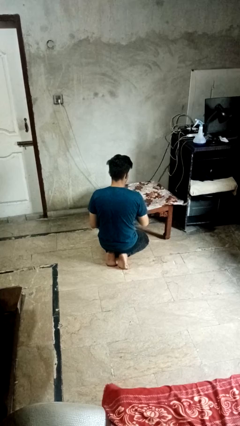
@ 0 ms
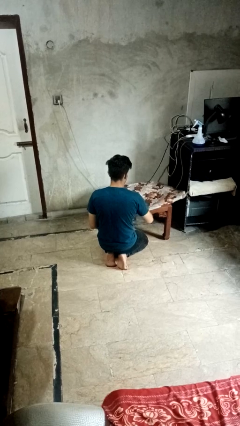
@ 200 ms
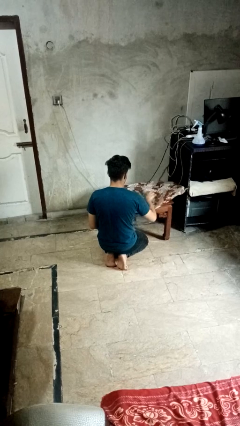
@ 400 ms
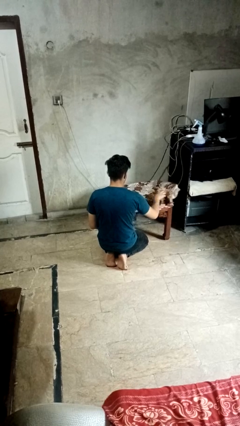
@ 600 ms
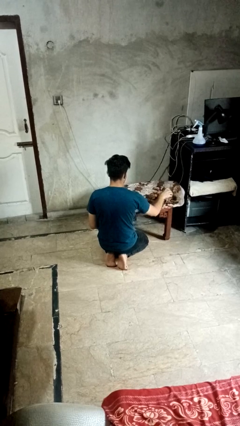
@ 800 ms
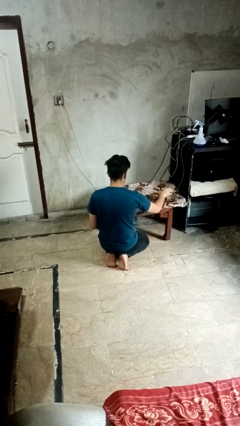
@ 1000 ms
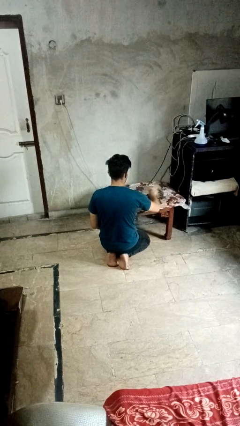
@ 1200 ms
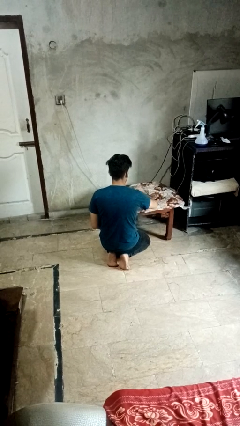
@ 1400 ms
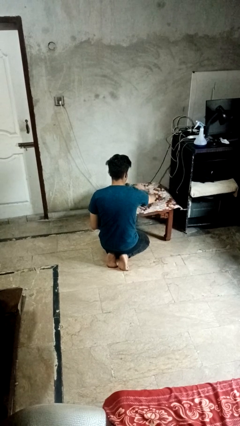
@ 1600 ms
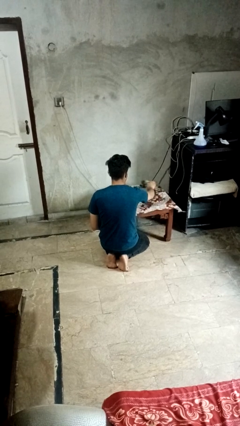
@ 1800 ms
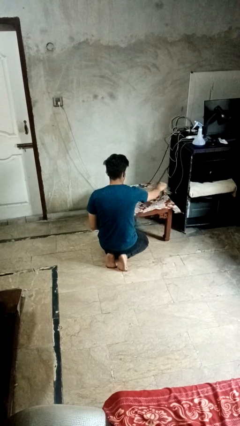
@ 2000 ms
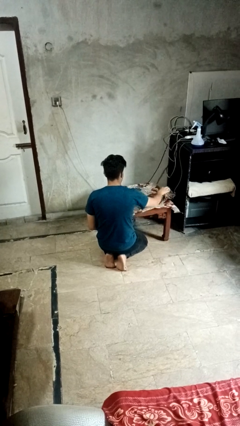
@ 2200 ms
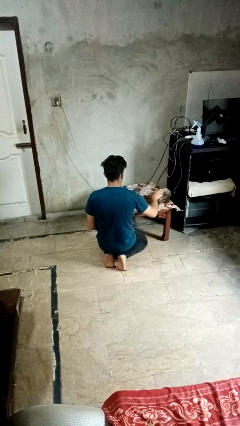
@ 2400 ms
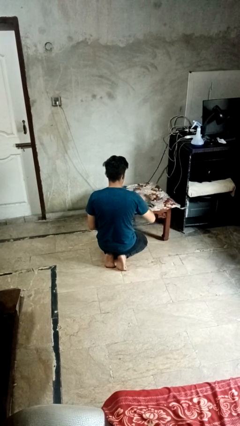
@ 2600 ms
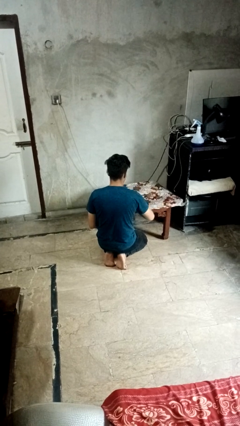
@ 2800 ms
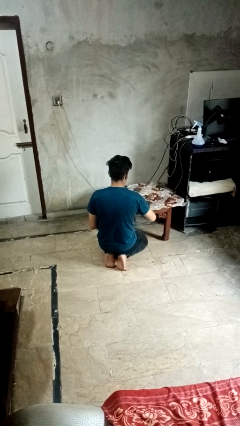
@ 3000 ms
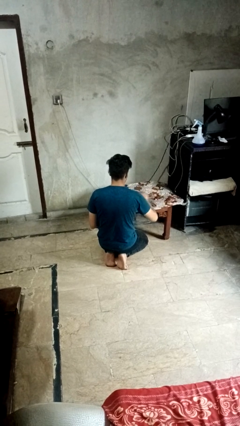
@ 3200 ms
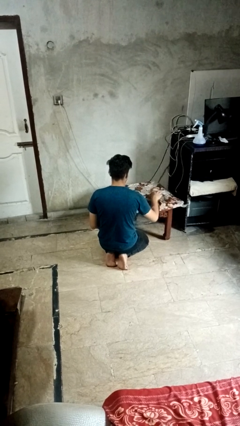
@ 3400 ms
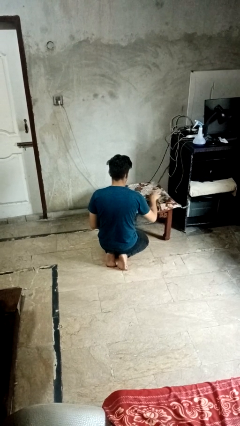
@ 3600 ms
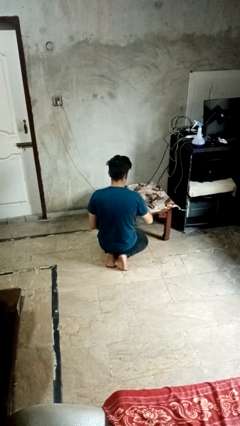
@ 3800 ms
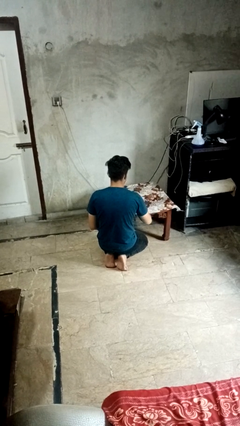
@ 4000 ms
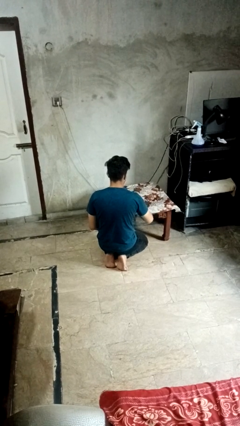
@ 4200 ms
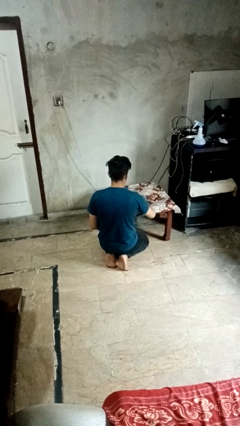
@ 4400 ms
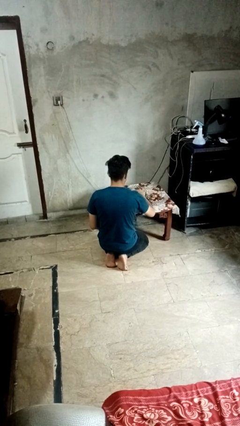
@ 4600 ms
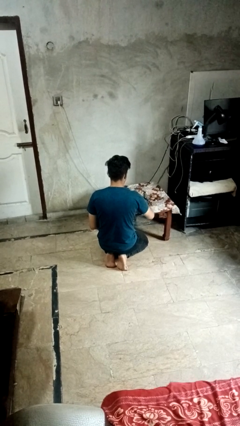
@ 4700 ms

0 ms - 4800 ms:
person cleans table with rag

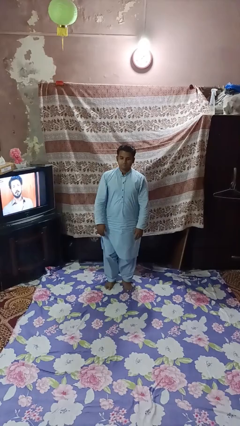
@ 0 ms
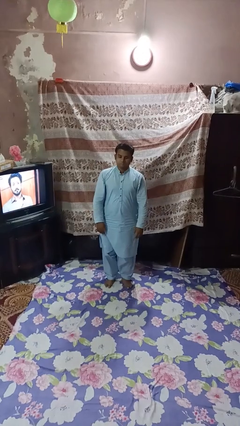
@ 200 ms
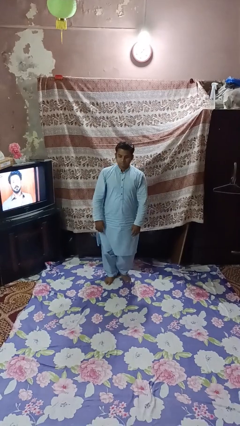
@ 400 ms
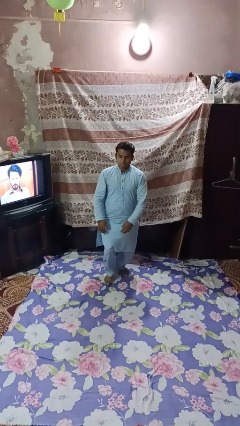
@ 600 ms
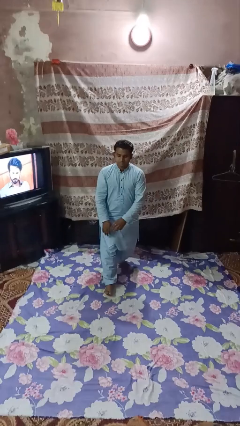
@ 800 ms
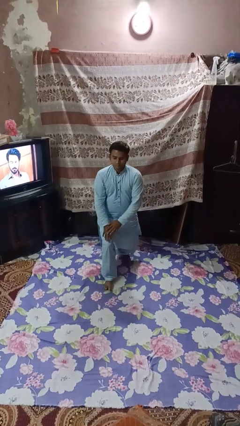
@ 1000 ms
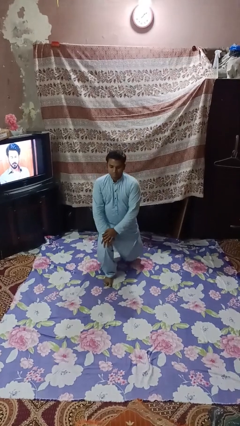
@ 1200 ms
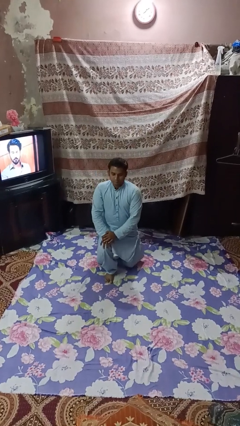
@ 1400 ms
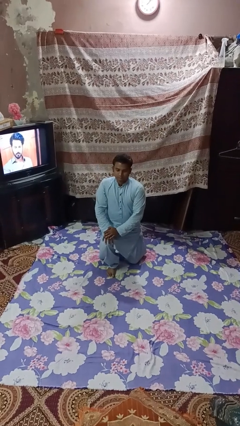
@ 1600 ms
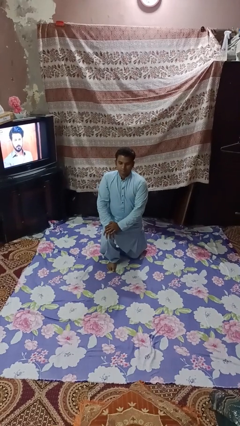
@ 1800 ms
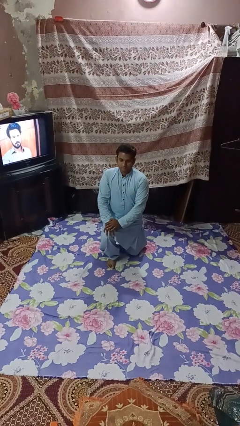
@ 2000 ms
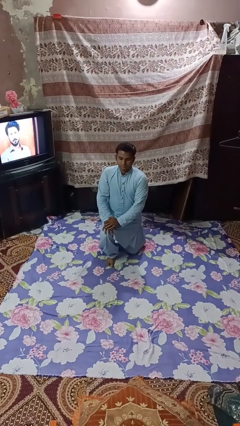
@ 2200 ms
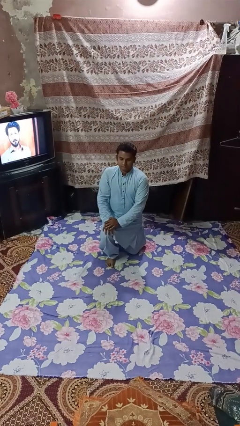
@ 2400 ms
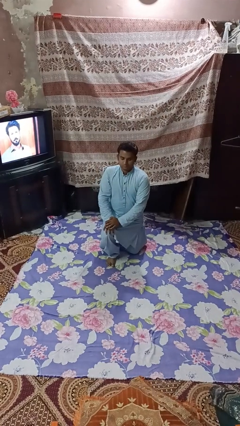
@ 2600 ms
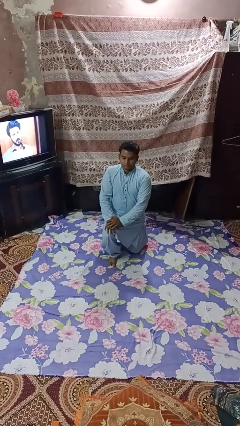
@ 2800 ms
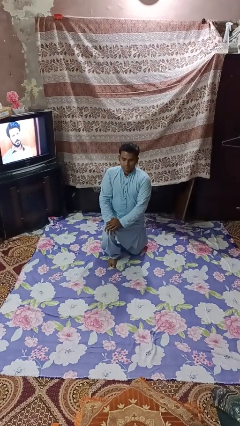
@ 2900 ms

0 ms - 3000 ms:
person exercises with lunges

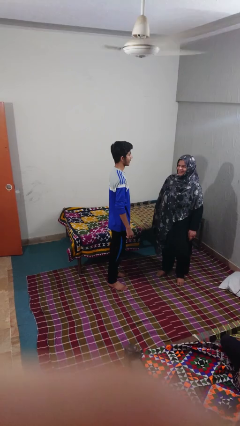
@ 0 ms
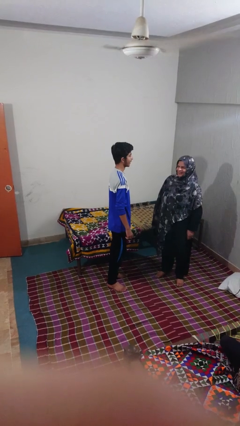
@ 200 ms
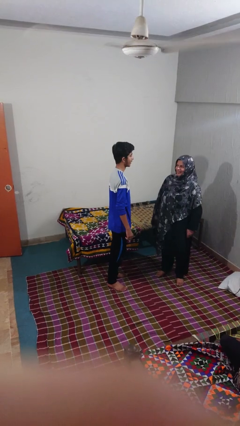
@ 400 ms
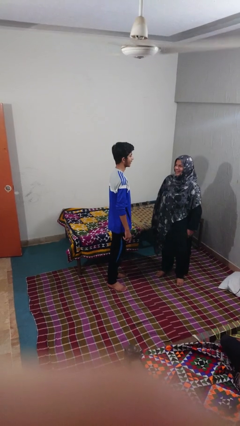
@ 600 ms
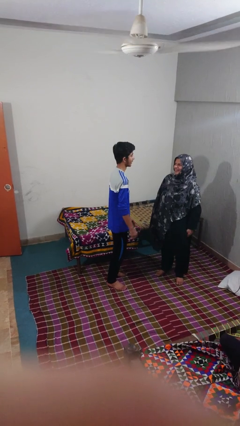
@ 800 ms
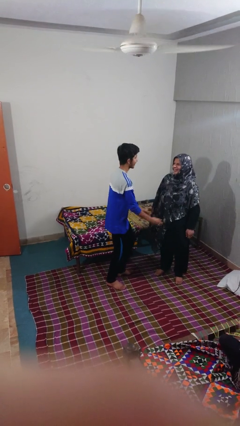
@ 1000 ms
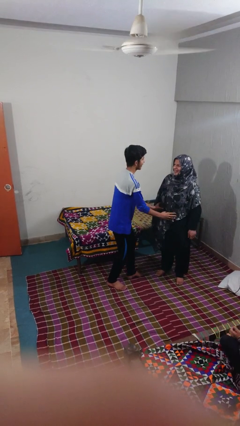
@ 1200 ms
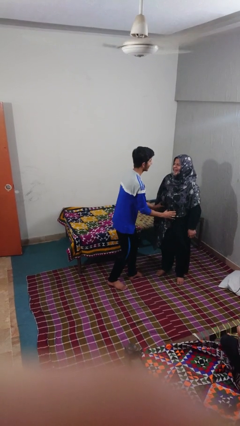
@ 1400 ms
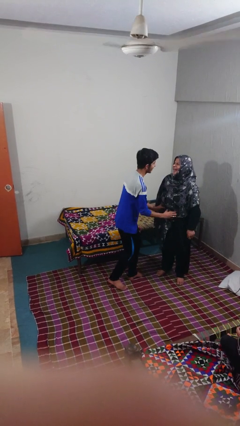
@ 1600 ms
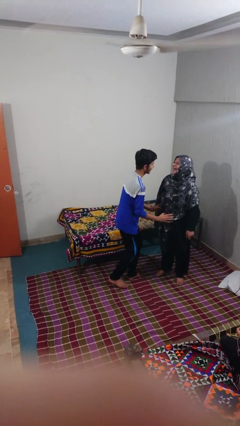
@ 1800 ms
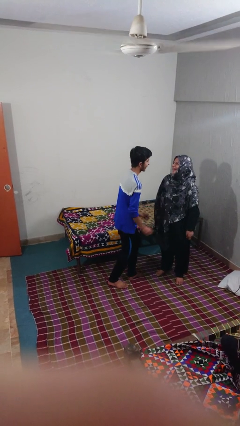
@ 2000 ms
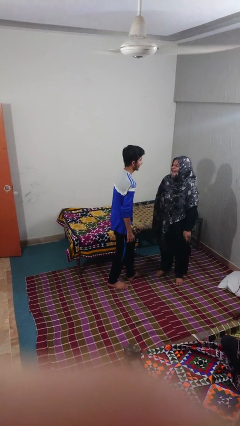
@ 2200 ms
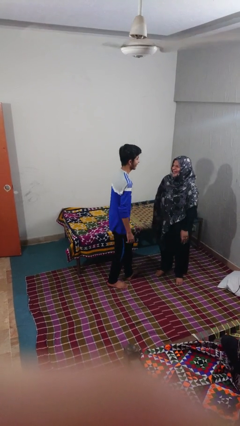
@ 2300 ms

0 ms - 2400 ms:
person tickles person

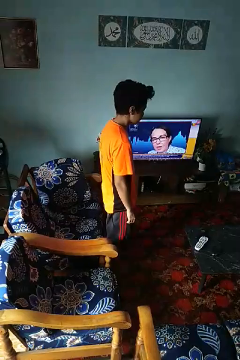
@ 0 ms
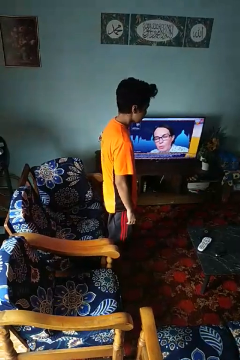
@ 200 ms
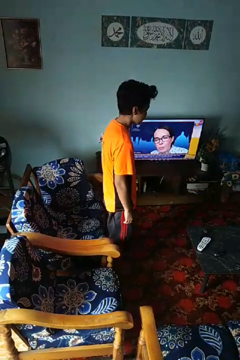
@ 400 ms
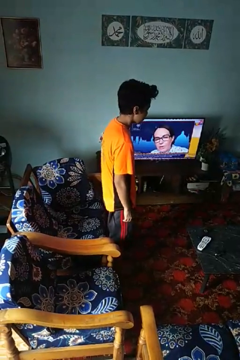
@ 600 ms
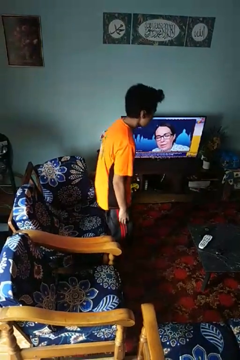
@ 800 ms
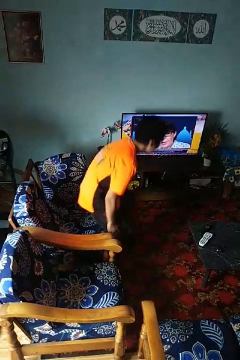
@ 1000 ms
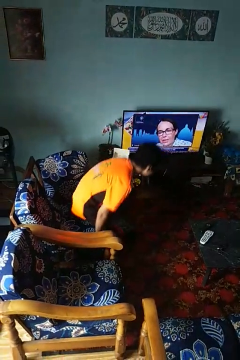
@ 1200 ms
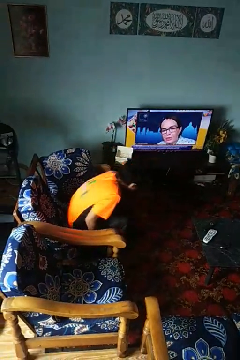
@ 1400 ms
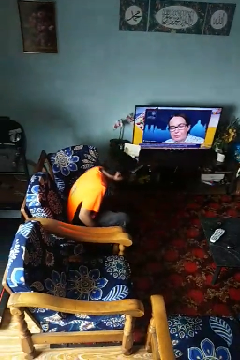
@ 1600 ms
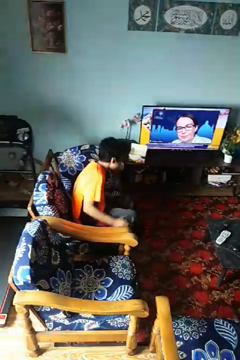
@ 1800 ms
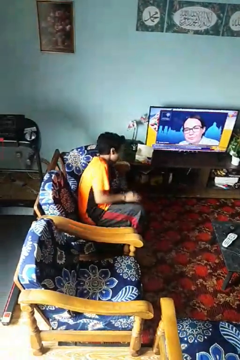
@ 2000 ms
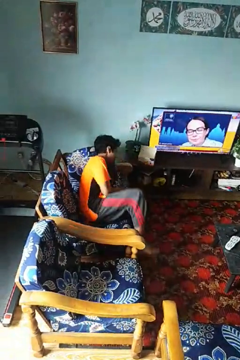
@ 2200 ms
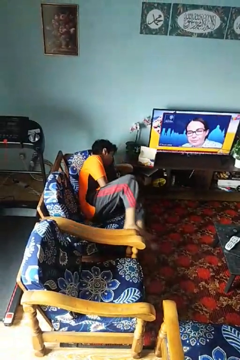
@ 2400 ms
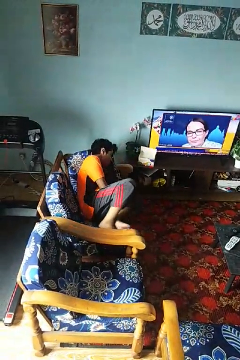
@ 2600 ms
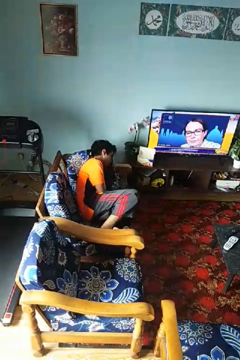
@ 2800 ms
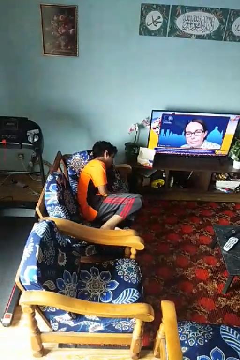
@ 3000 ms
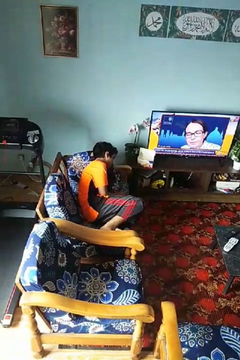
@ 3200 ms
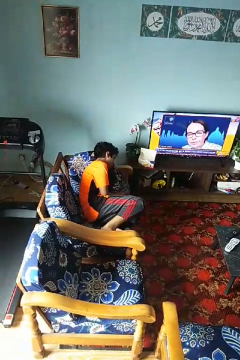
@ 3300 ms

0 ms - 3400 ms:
person lies down on couch

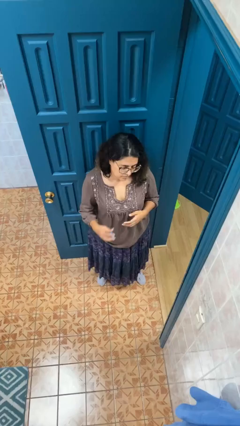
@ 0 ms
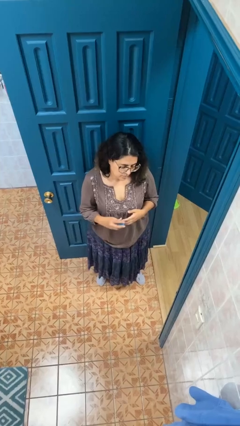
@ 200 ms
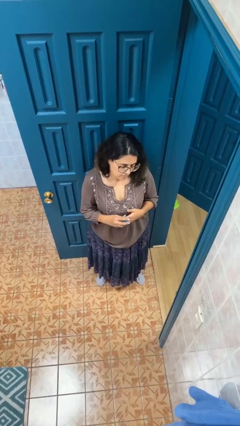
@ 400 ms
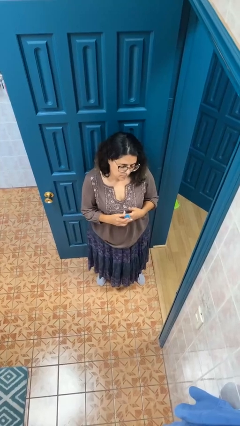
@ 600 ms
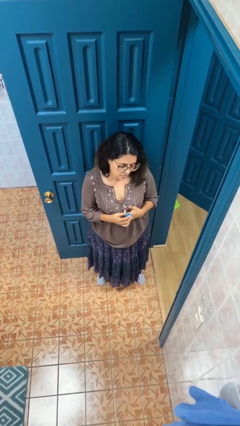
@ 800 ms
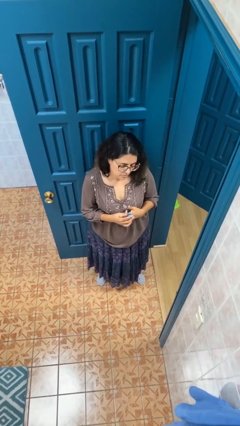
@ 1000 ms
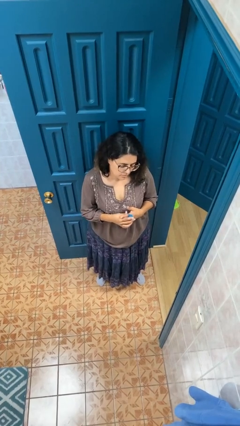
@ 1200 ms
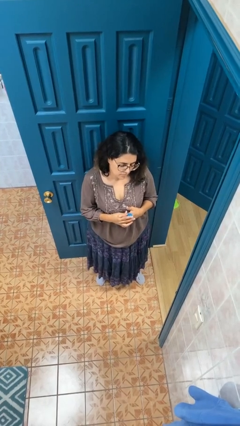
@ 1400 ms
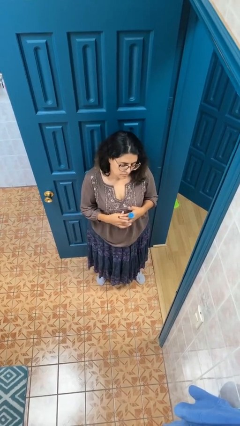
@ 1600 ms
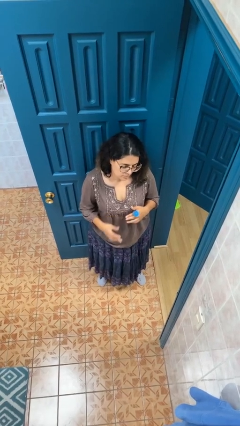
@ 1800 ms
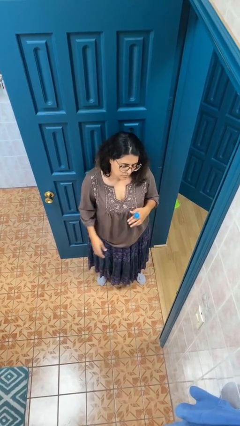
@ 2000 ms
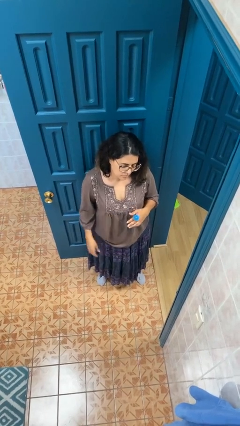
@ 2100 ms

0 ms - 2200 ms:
person puts on ring

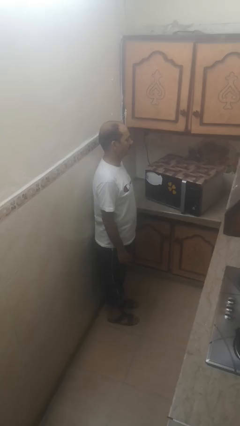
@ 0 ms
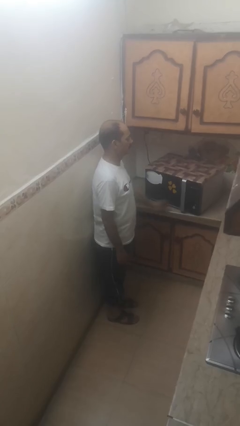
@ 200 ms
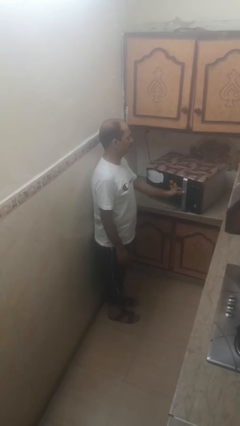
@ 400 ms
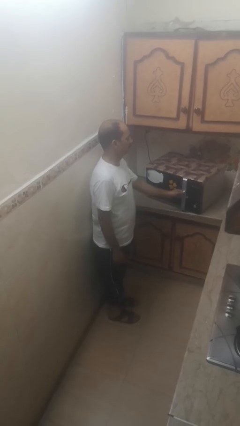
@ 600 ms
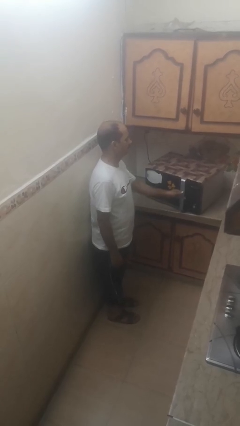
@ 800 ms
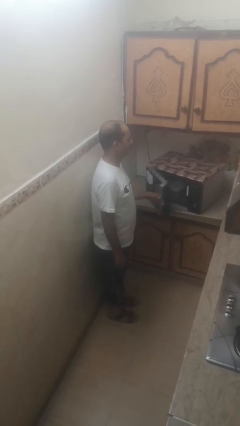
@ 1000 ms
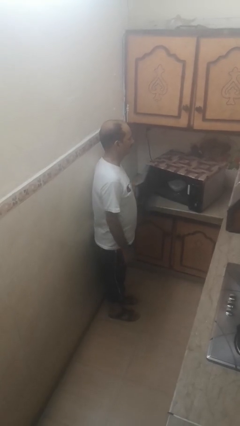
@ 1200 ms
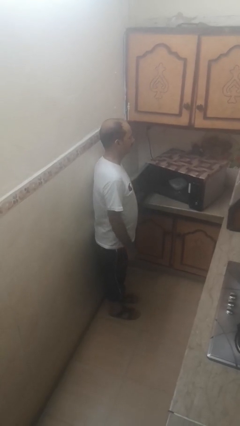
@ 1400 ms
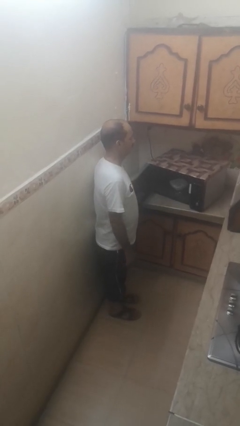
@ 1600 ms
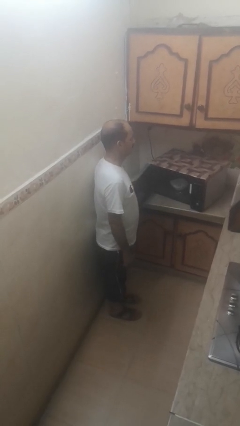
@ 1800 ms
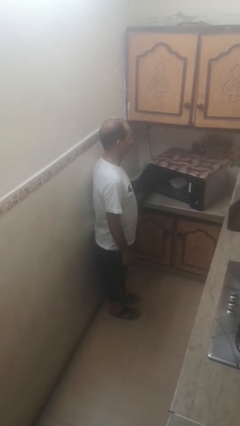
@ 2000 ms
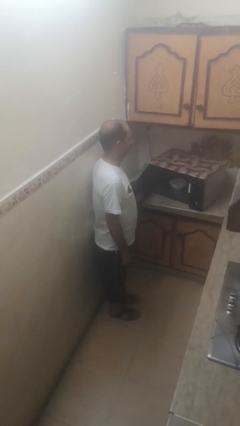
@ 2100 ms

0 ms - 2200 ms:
person opens microwave
